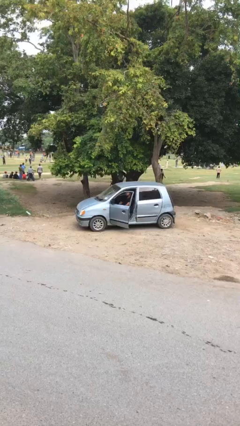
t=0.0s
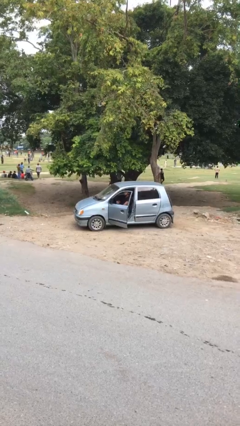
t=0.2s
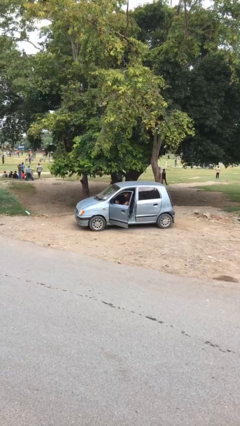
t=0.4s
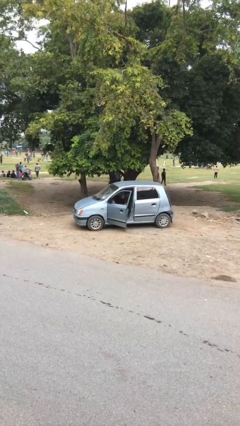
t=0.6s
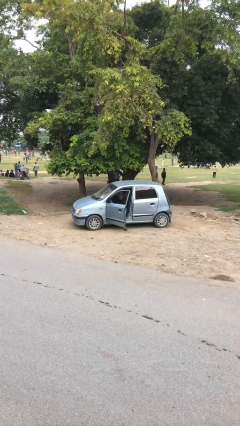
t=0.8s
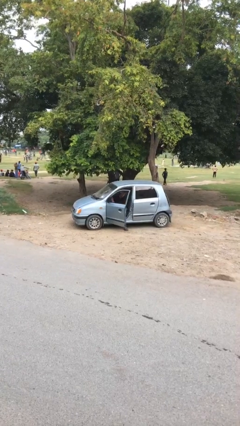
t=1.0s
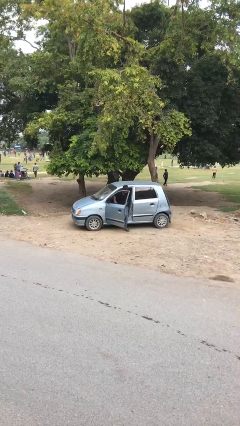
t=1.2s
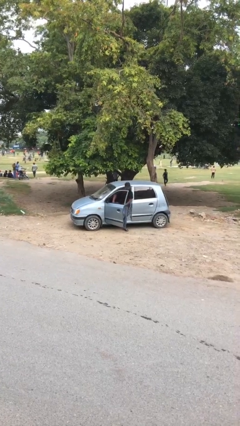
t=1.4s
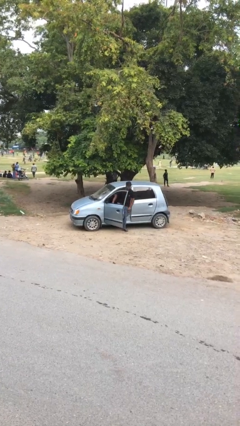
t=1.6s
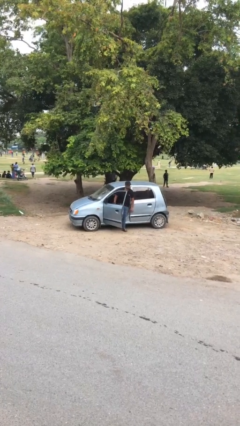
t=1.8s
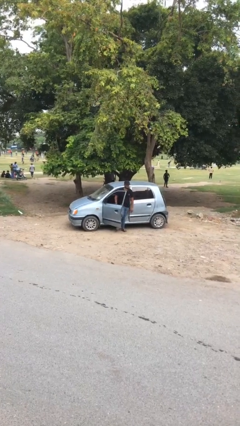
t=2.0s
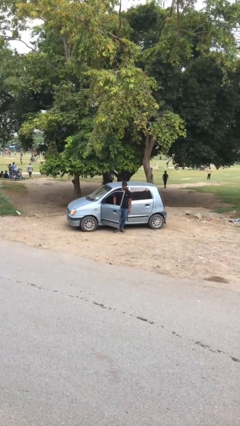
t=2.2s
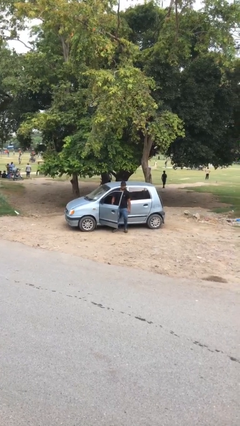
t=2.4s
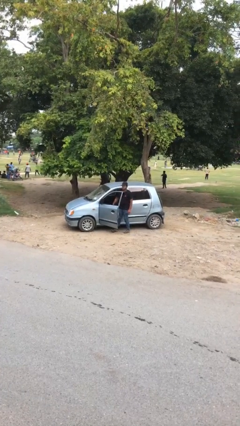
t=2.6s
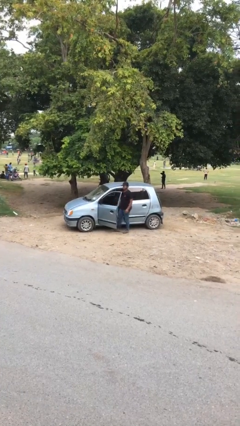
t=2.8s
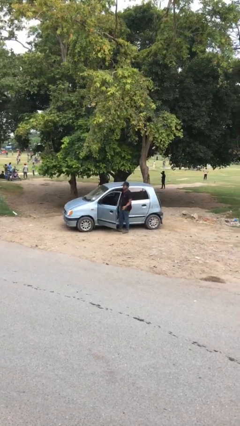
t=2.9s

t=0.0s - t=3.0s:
person exits car

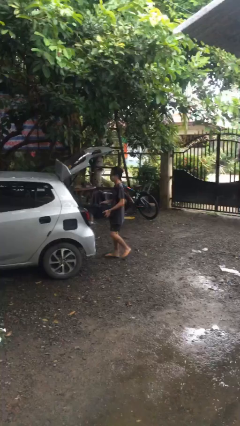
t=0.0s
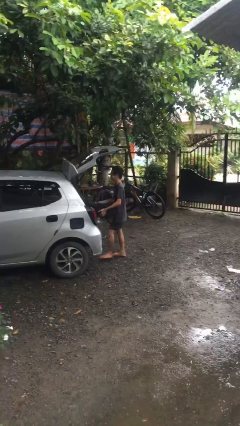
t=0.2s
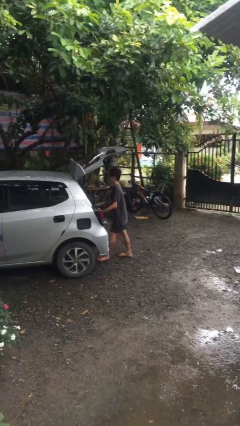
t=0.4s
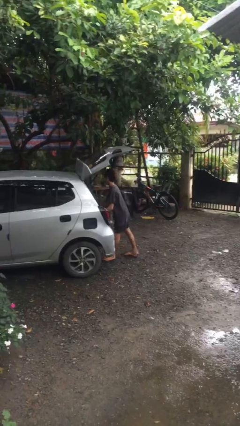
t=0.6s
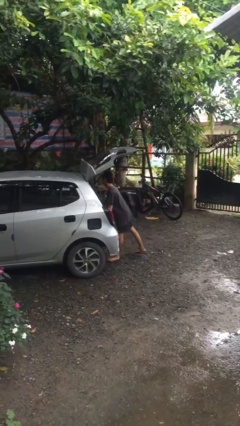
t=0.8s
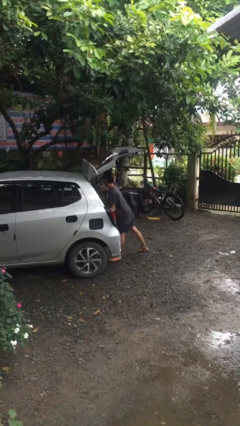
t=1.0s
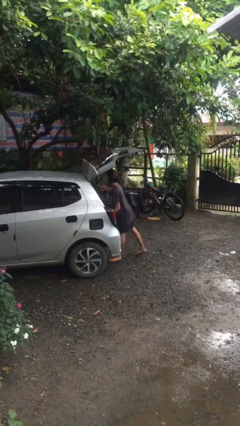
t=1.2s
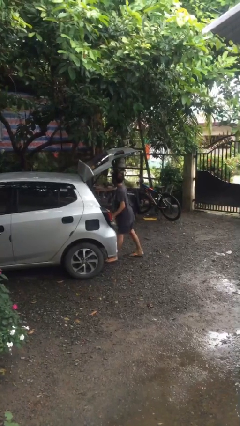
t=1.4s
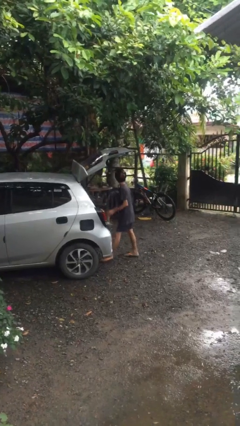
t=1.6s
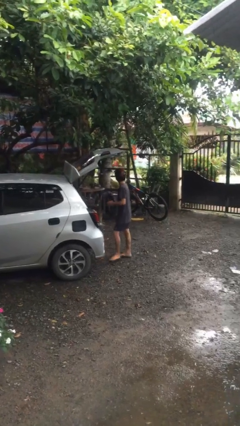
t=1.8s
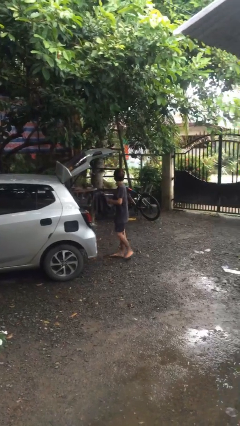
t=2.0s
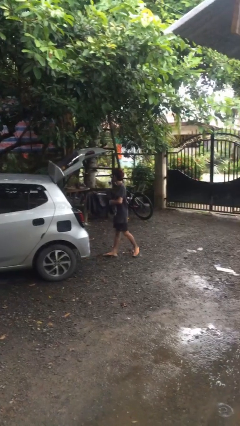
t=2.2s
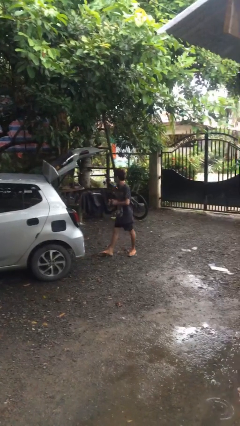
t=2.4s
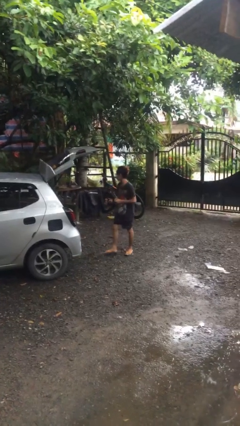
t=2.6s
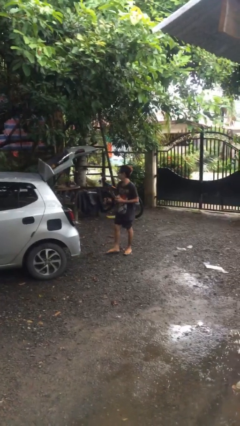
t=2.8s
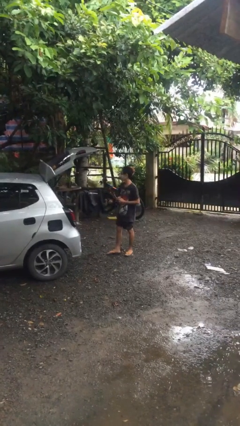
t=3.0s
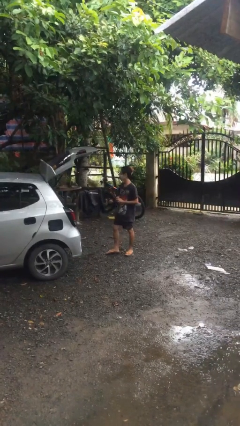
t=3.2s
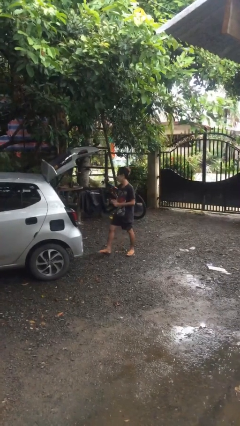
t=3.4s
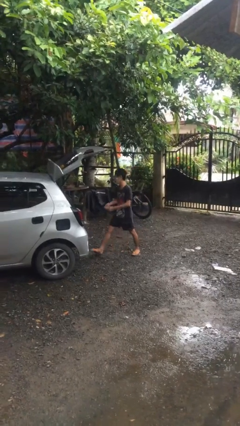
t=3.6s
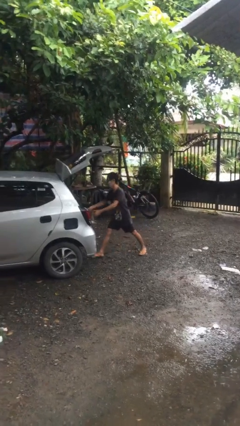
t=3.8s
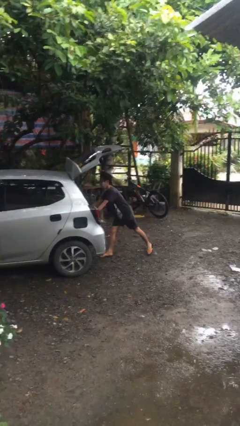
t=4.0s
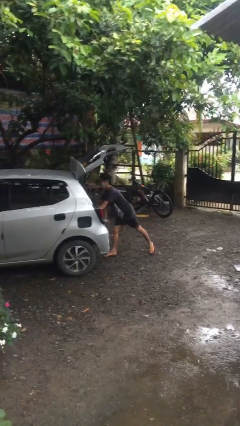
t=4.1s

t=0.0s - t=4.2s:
person loads car

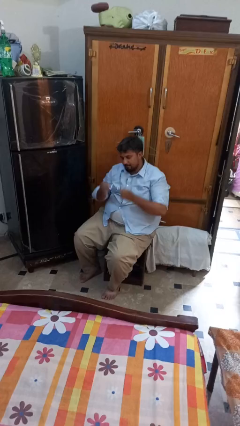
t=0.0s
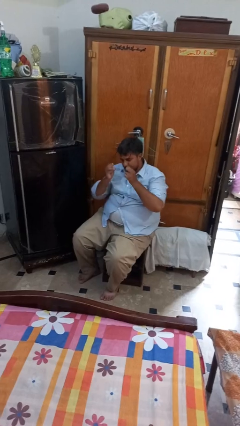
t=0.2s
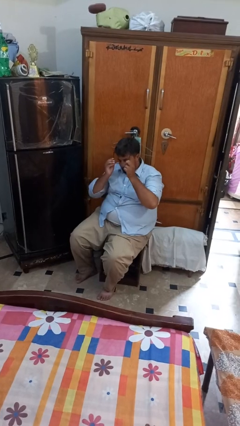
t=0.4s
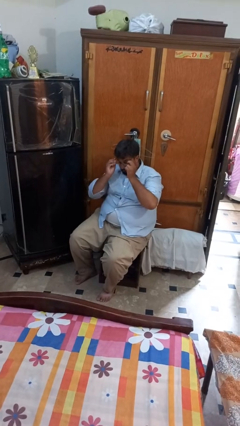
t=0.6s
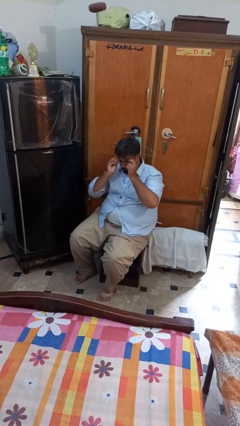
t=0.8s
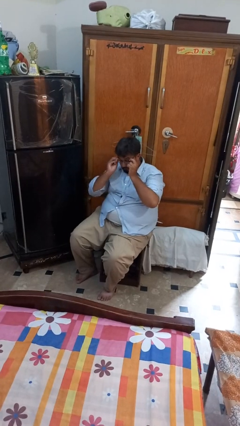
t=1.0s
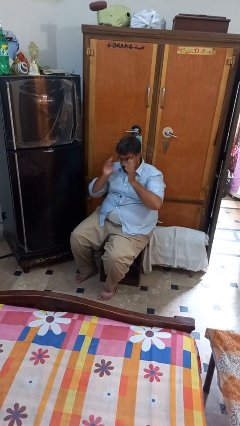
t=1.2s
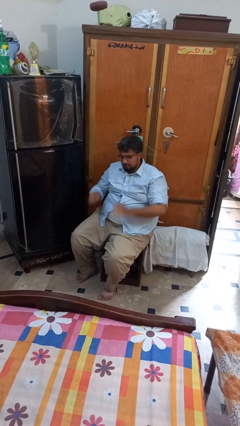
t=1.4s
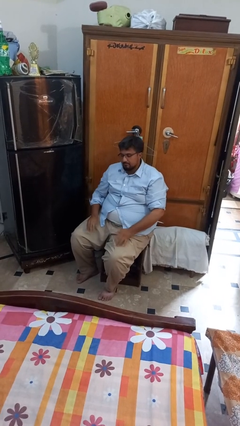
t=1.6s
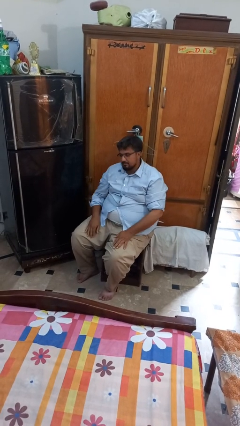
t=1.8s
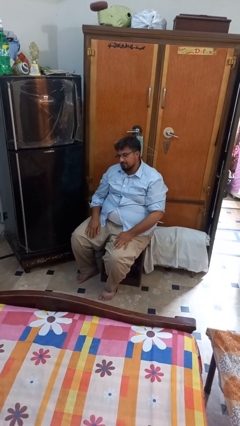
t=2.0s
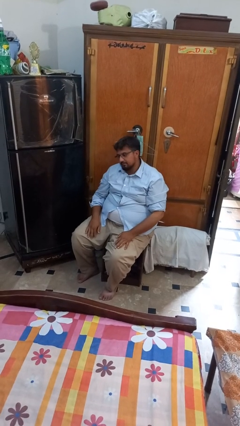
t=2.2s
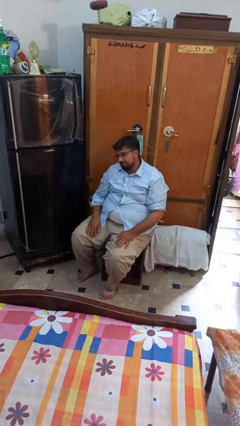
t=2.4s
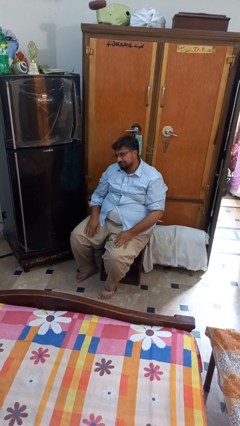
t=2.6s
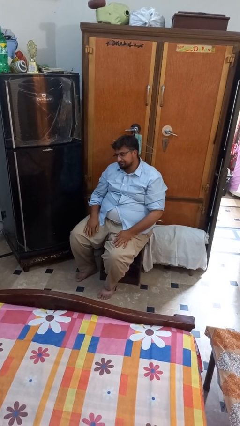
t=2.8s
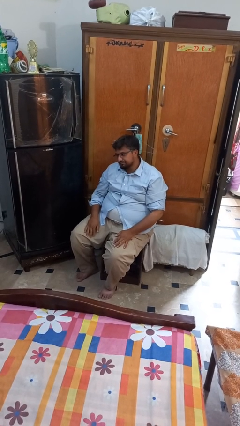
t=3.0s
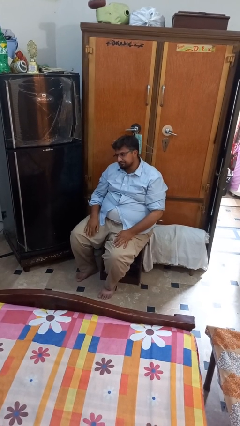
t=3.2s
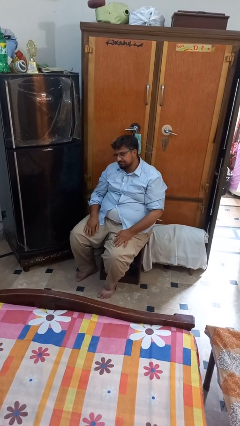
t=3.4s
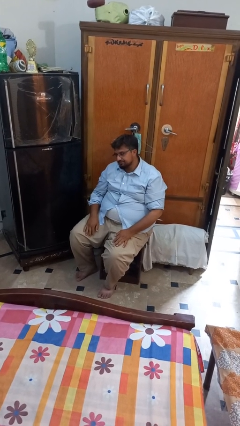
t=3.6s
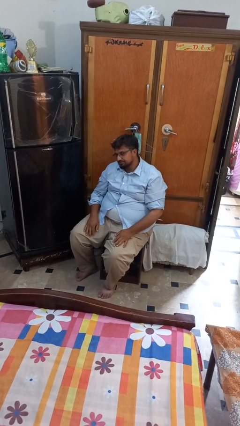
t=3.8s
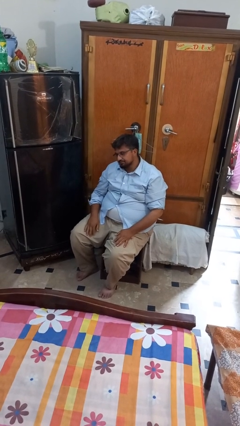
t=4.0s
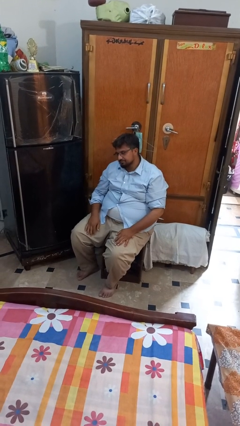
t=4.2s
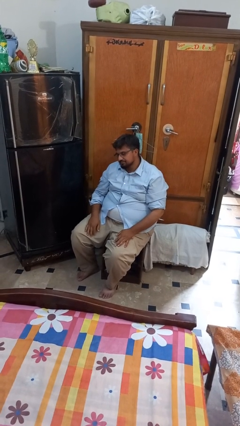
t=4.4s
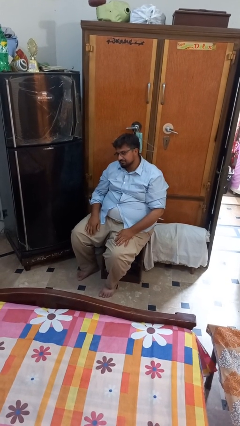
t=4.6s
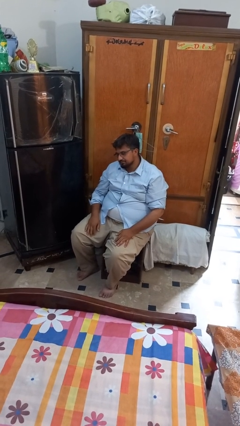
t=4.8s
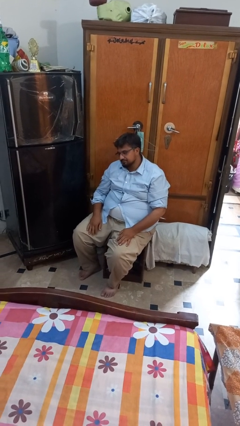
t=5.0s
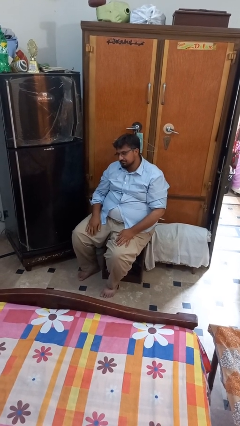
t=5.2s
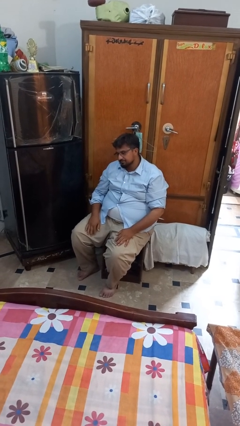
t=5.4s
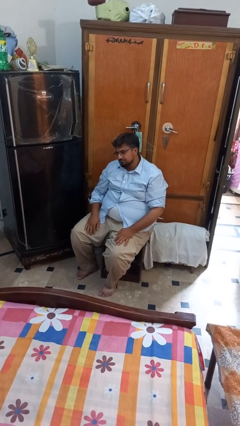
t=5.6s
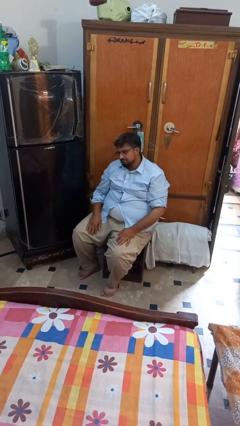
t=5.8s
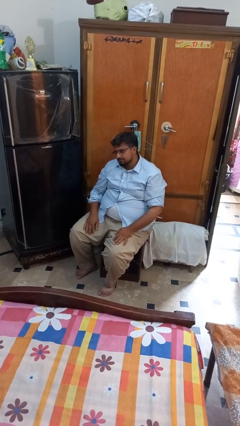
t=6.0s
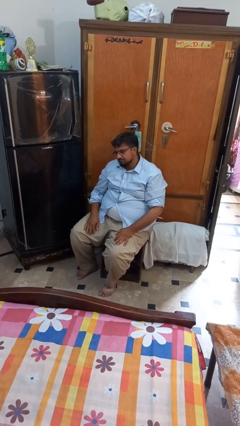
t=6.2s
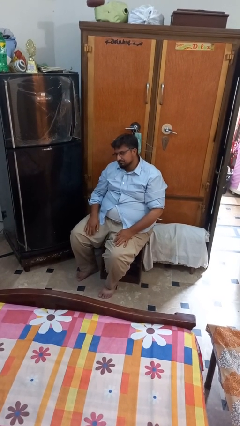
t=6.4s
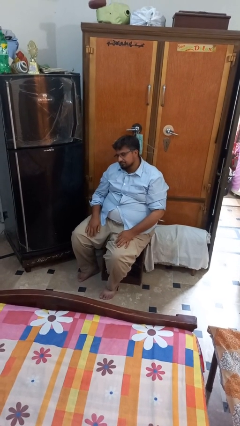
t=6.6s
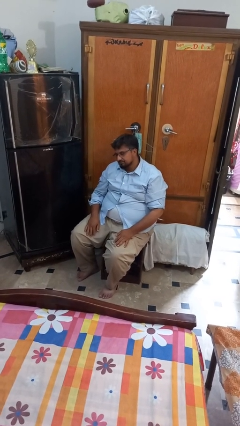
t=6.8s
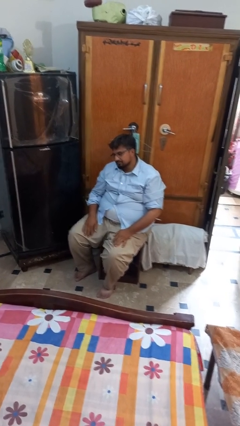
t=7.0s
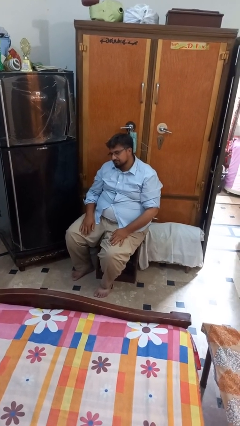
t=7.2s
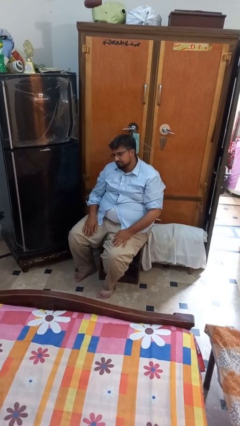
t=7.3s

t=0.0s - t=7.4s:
person puts on glasses

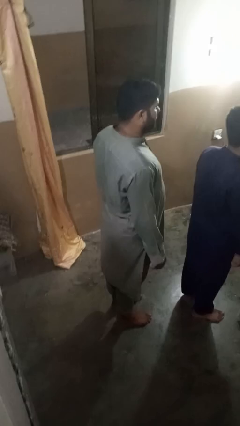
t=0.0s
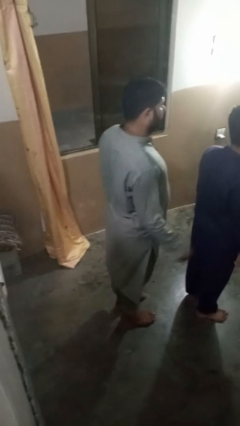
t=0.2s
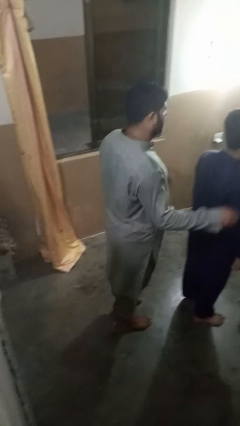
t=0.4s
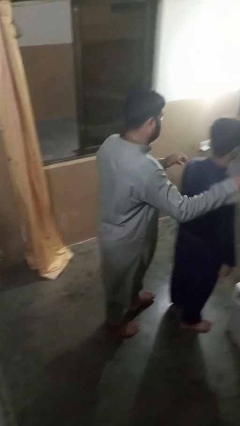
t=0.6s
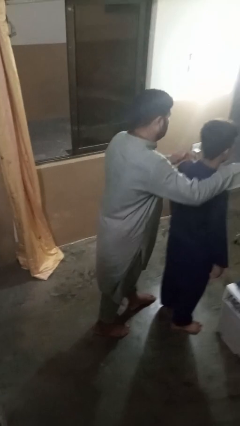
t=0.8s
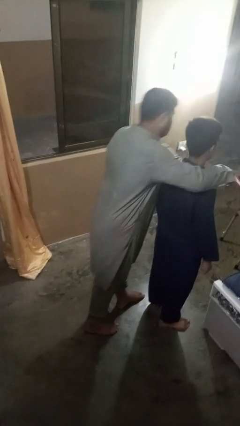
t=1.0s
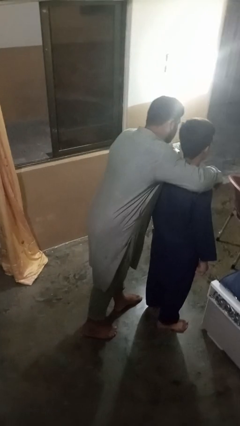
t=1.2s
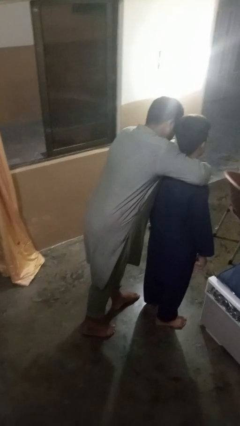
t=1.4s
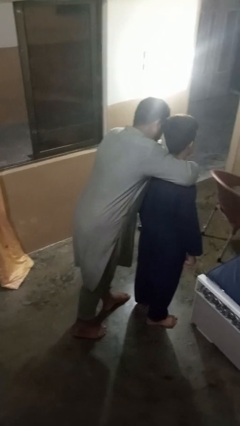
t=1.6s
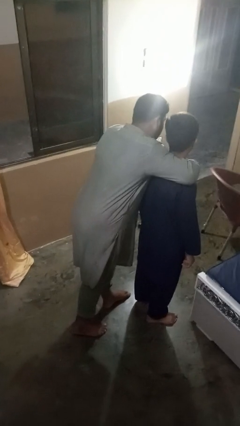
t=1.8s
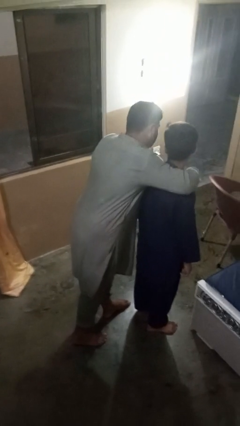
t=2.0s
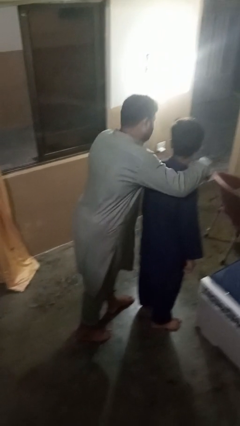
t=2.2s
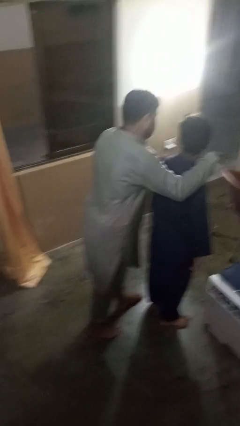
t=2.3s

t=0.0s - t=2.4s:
person hugs person from behind

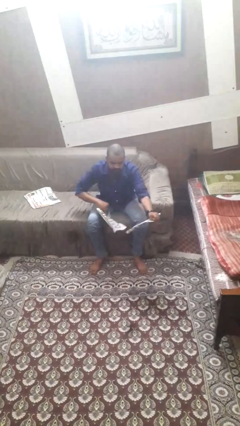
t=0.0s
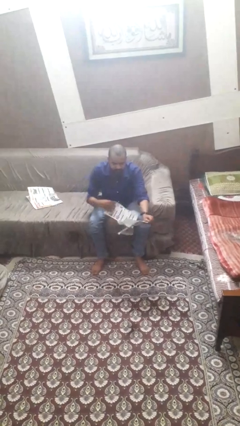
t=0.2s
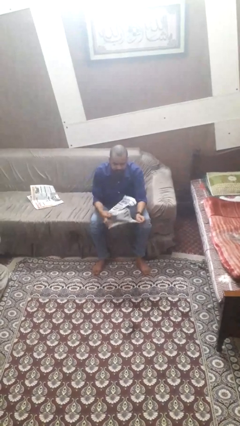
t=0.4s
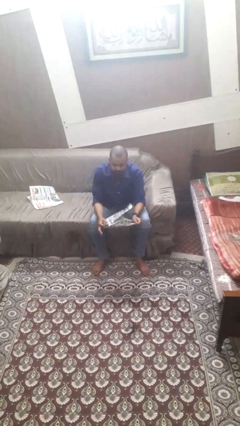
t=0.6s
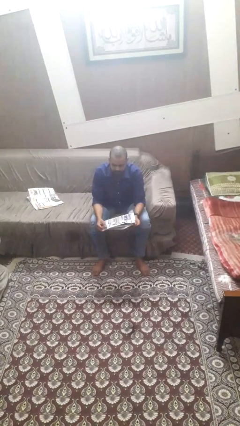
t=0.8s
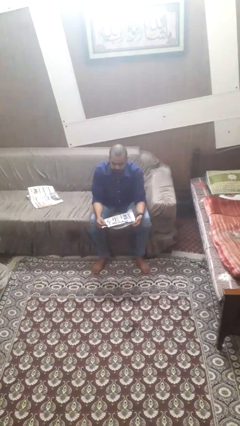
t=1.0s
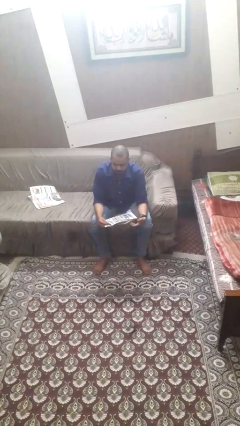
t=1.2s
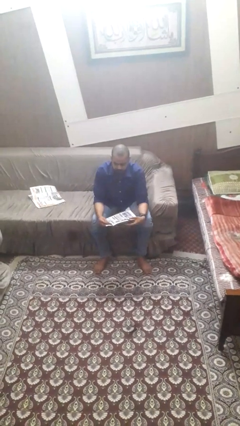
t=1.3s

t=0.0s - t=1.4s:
person tears paper
